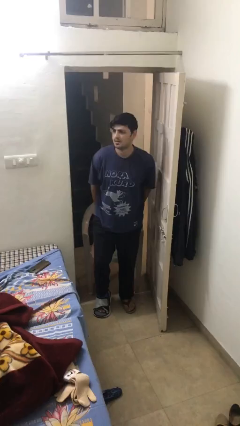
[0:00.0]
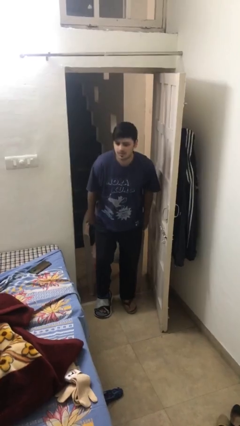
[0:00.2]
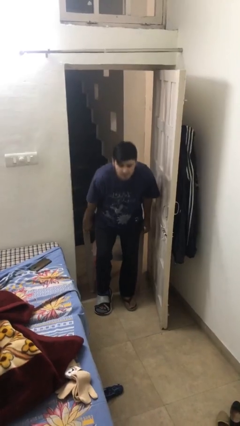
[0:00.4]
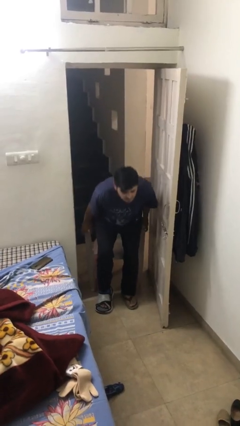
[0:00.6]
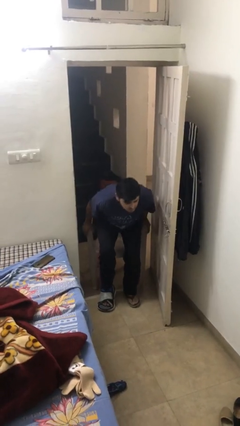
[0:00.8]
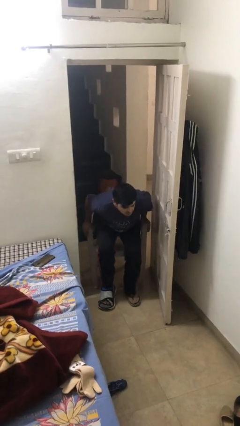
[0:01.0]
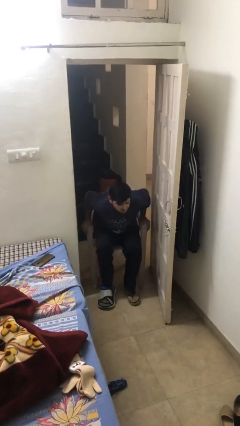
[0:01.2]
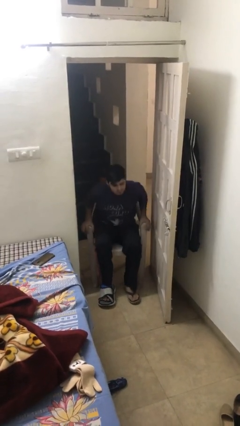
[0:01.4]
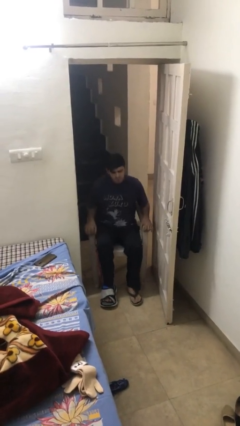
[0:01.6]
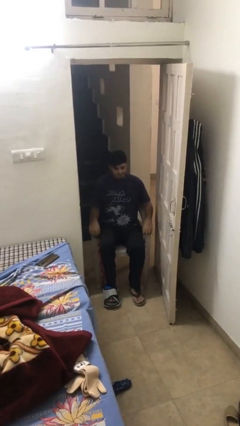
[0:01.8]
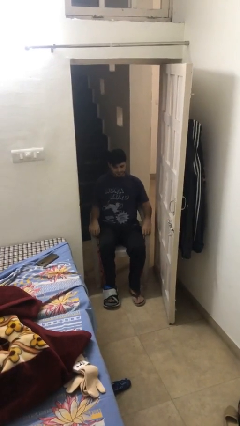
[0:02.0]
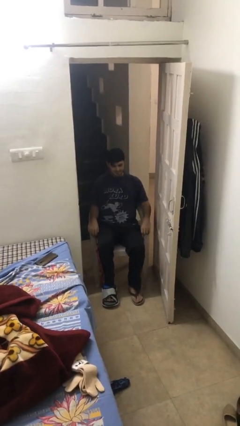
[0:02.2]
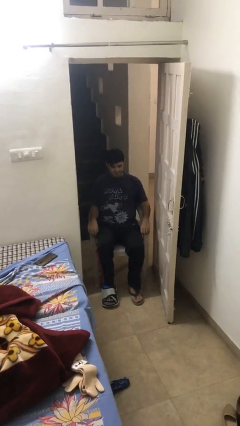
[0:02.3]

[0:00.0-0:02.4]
person sits down

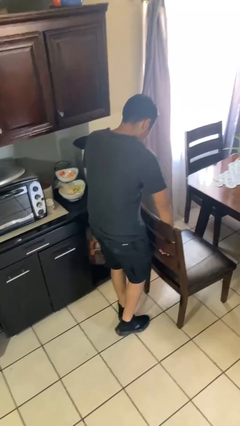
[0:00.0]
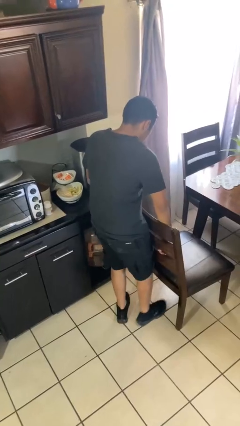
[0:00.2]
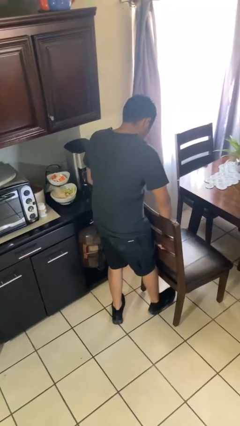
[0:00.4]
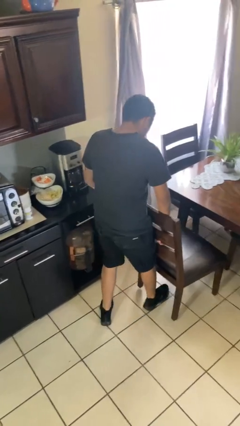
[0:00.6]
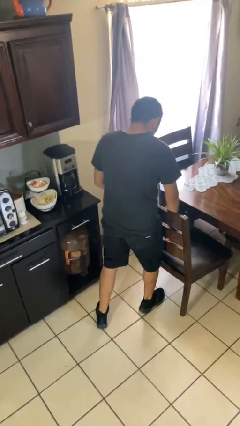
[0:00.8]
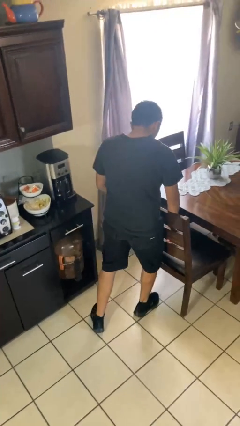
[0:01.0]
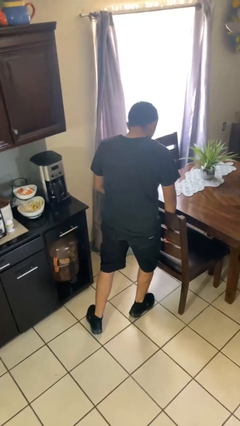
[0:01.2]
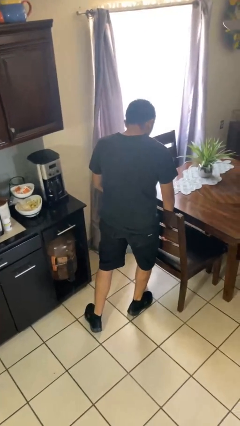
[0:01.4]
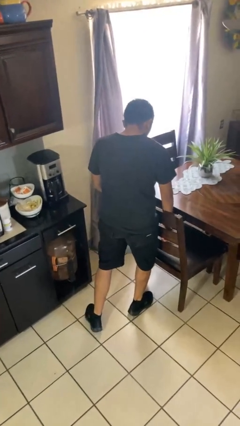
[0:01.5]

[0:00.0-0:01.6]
person pushes in chair

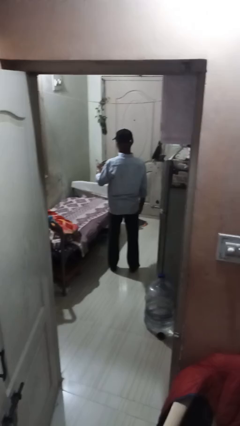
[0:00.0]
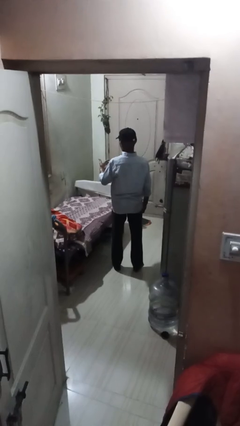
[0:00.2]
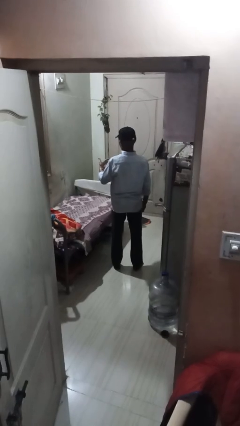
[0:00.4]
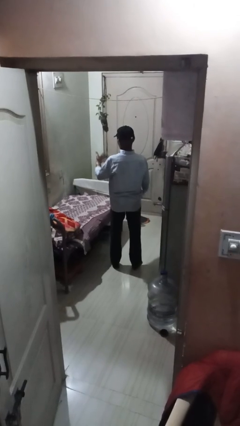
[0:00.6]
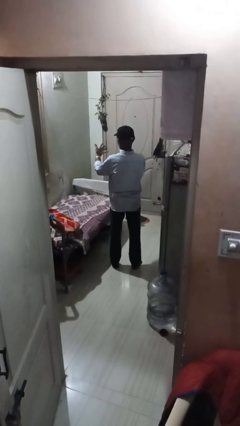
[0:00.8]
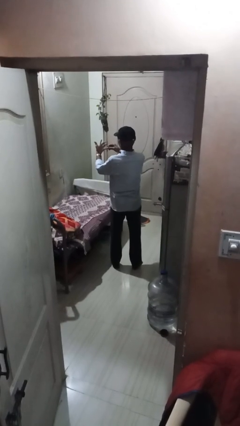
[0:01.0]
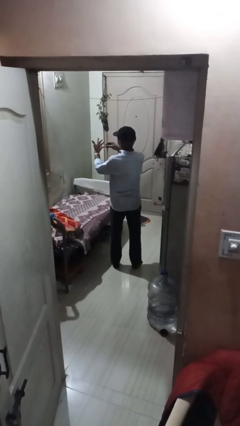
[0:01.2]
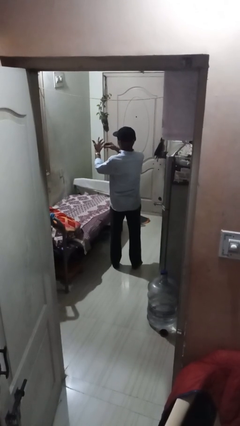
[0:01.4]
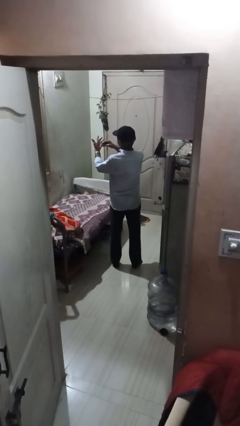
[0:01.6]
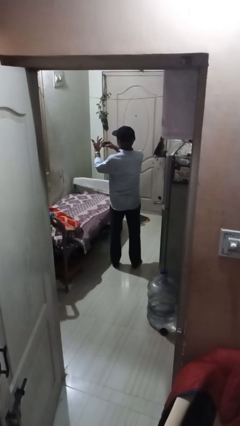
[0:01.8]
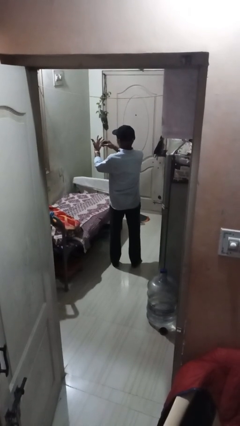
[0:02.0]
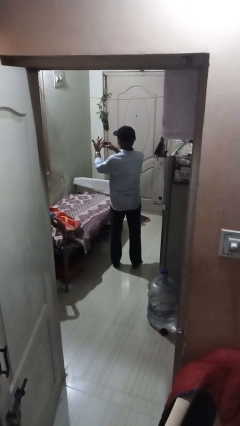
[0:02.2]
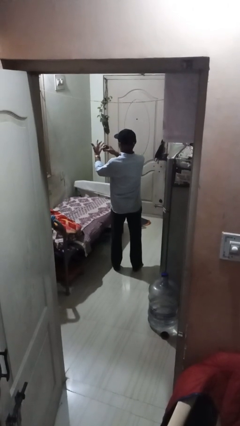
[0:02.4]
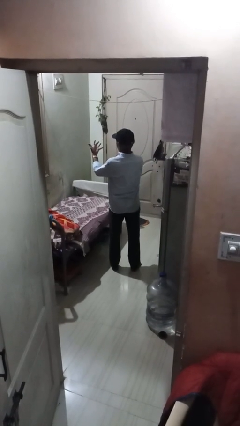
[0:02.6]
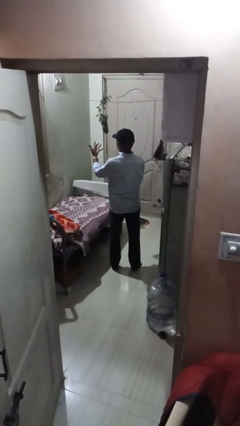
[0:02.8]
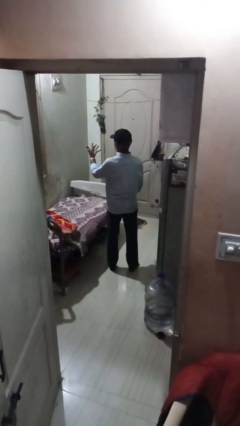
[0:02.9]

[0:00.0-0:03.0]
person puts on ring

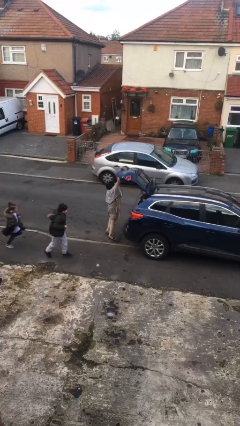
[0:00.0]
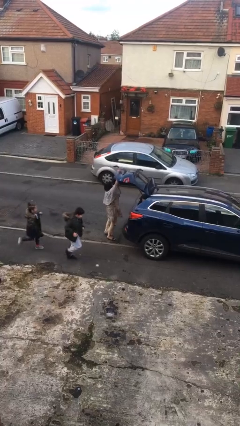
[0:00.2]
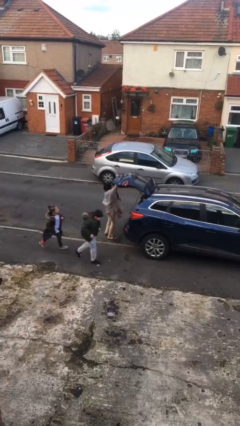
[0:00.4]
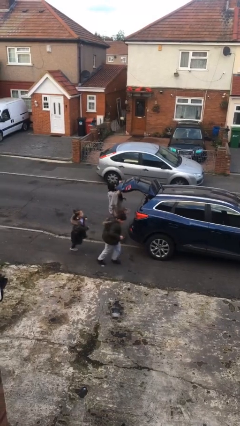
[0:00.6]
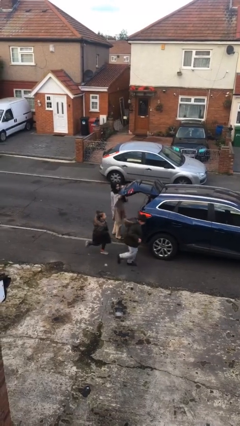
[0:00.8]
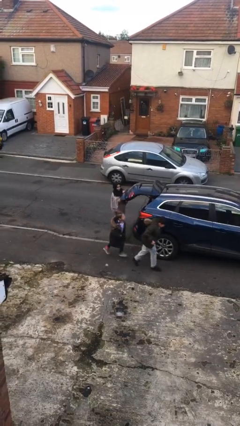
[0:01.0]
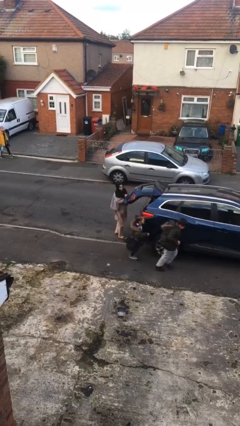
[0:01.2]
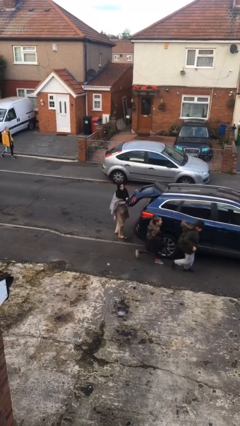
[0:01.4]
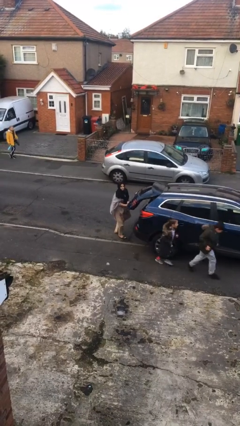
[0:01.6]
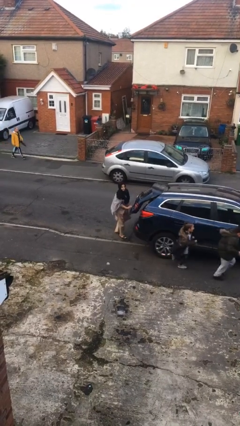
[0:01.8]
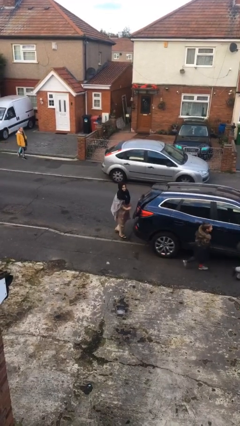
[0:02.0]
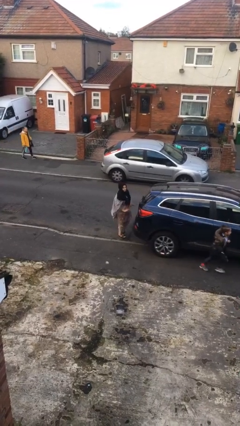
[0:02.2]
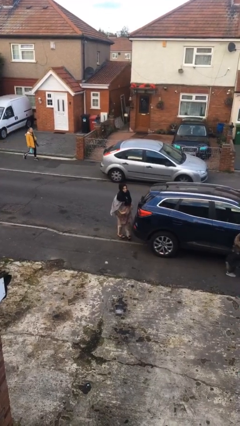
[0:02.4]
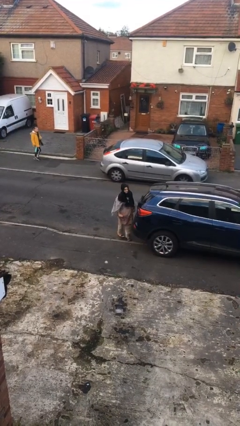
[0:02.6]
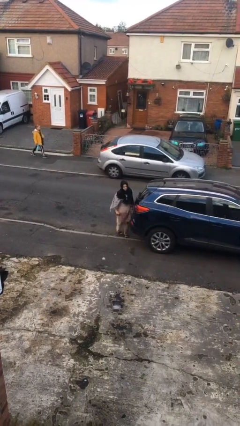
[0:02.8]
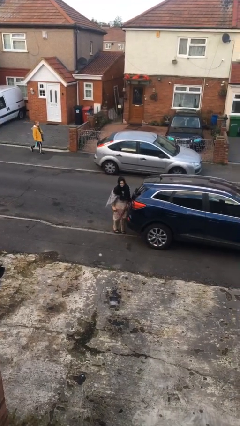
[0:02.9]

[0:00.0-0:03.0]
person closes car trunk

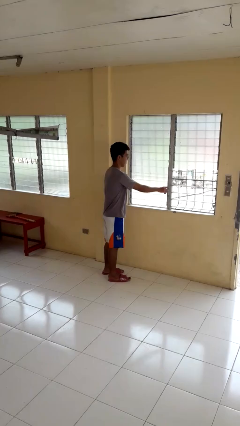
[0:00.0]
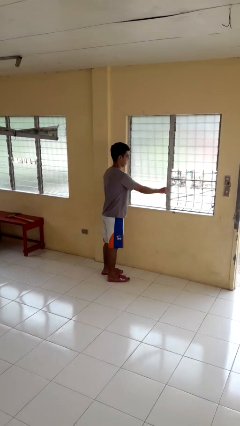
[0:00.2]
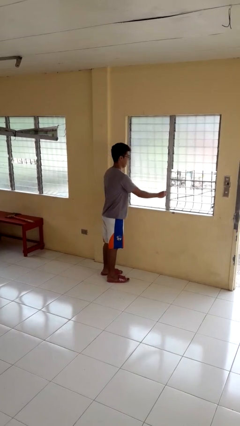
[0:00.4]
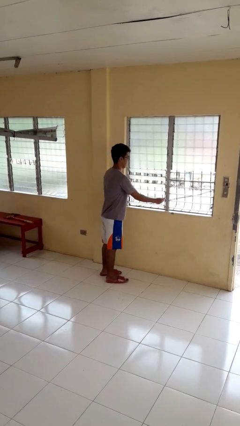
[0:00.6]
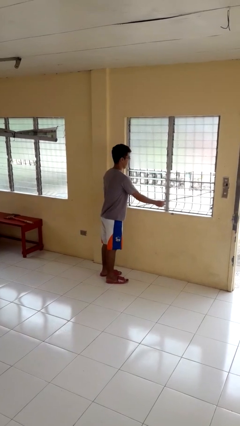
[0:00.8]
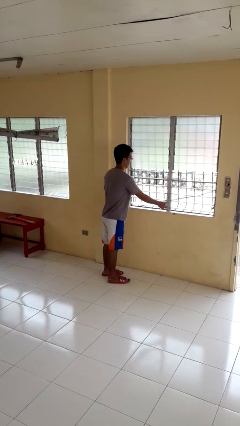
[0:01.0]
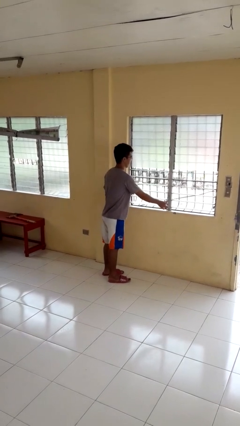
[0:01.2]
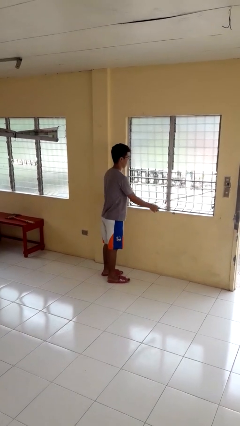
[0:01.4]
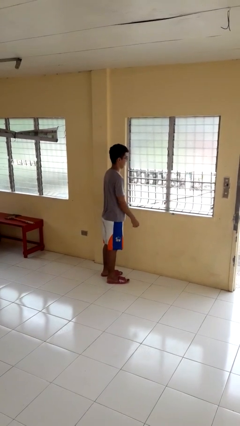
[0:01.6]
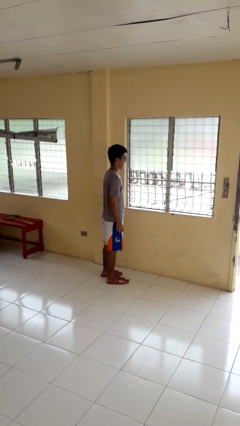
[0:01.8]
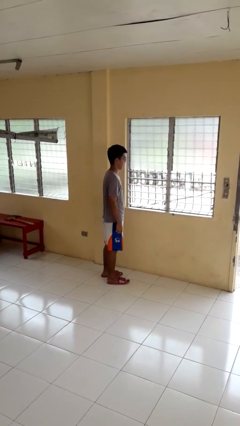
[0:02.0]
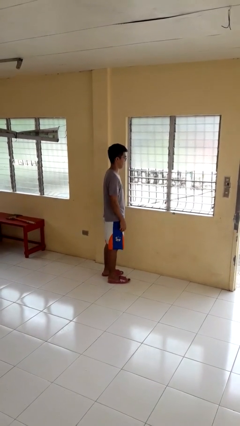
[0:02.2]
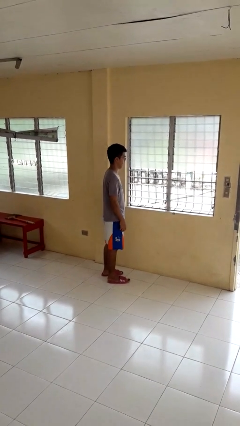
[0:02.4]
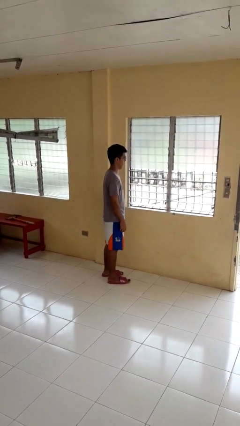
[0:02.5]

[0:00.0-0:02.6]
person opens home window

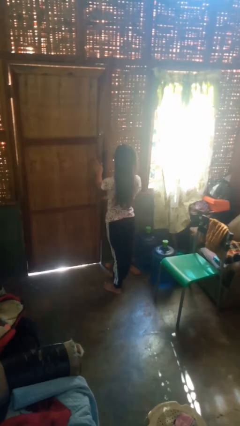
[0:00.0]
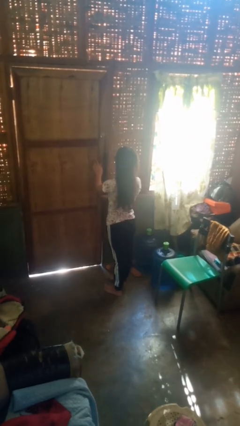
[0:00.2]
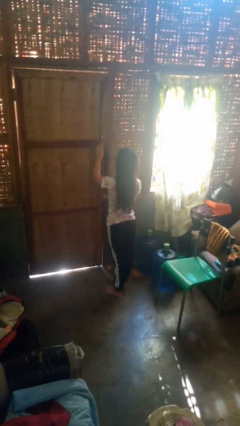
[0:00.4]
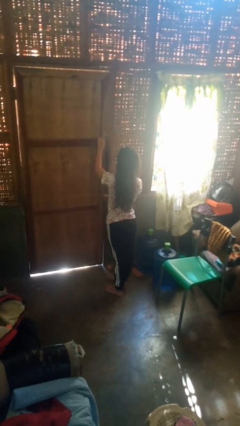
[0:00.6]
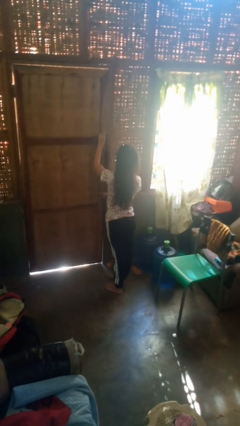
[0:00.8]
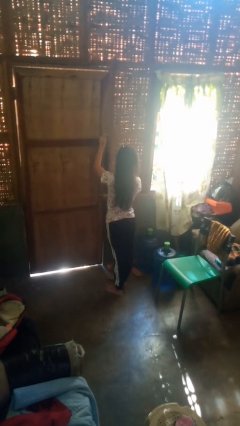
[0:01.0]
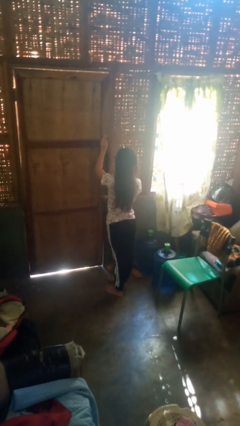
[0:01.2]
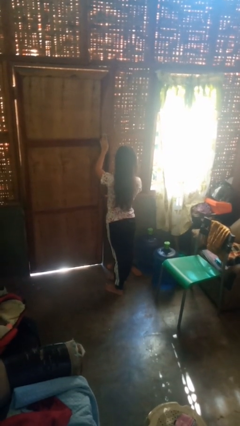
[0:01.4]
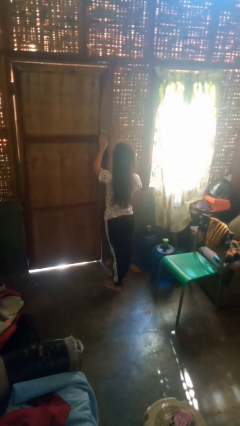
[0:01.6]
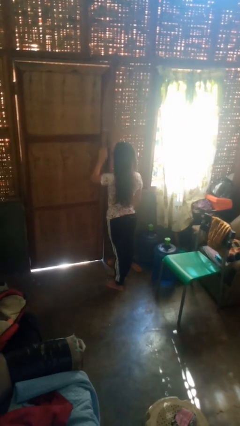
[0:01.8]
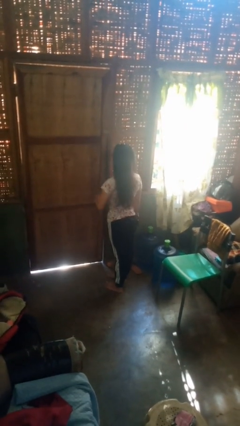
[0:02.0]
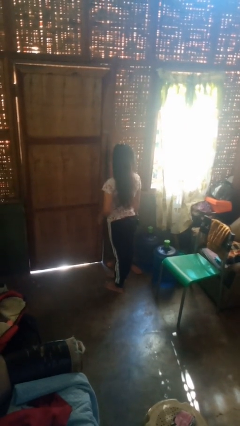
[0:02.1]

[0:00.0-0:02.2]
person locks door with keys

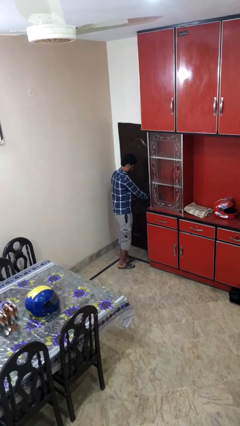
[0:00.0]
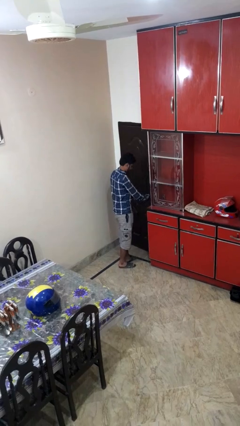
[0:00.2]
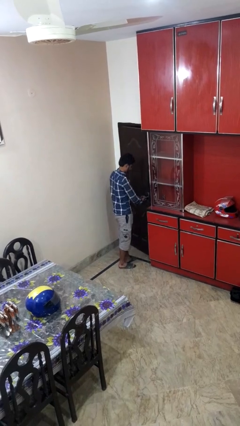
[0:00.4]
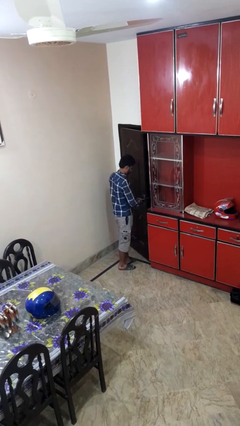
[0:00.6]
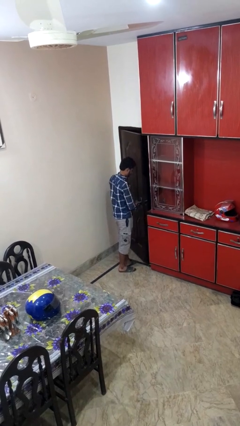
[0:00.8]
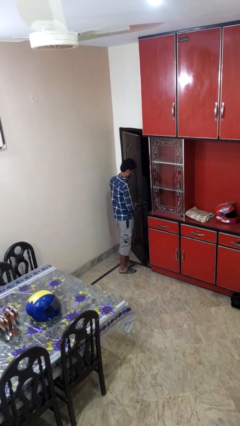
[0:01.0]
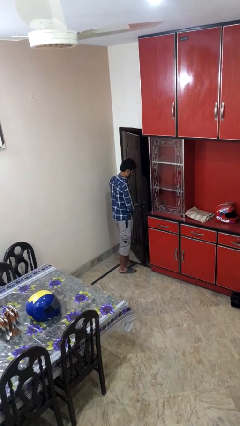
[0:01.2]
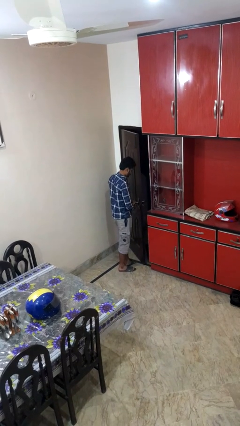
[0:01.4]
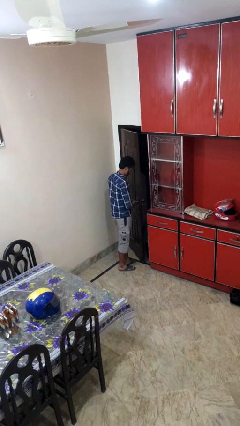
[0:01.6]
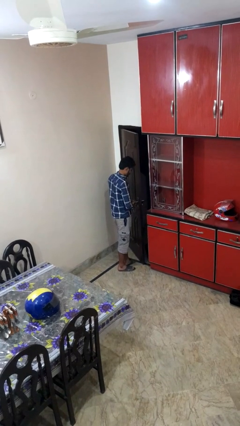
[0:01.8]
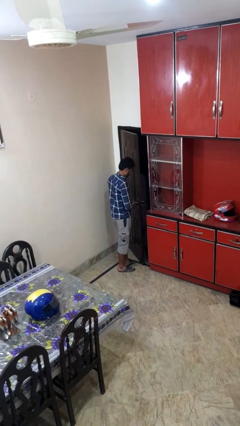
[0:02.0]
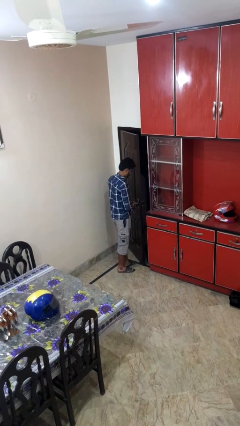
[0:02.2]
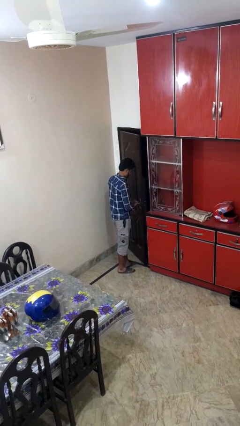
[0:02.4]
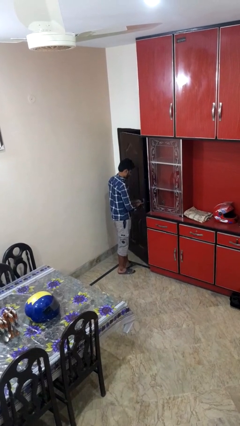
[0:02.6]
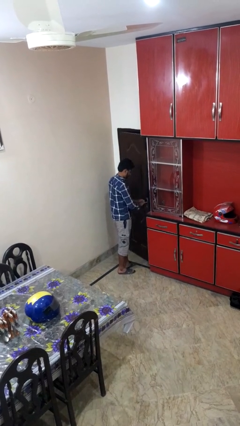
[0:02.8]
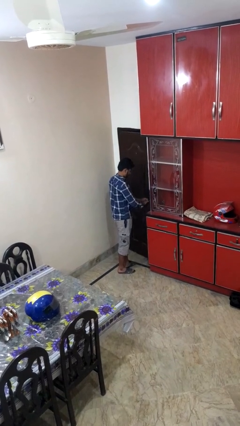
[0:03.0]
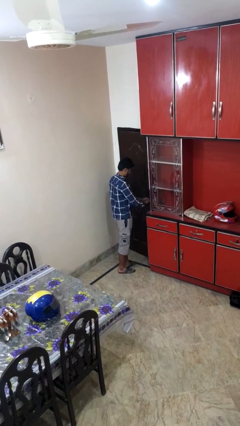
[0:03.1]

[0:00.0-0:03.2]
person opens facility door
